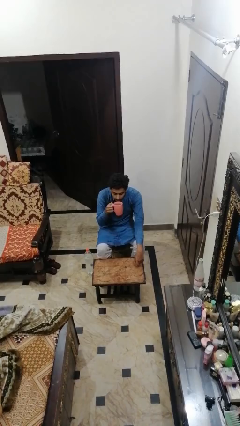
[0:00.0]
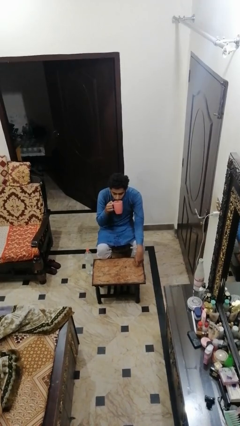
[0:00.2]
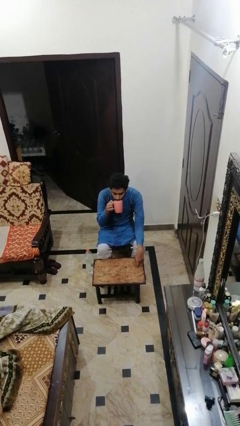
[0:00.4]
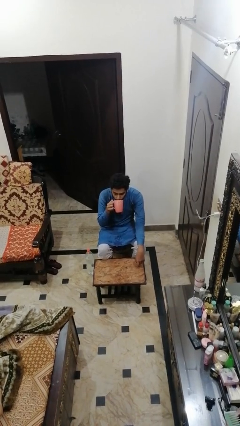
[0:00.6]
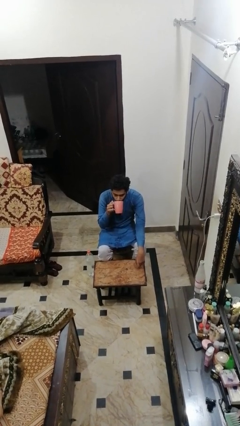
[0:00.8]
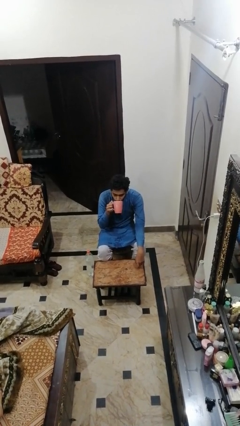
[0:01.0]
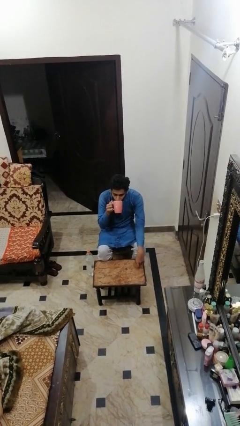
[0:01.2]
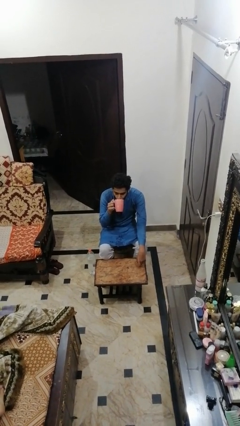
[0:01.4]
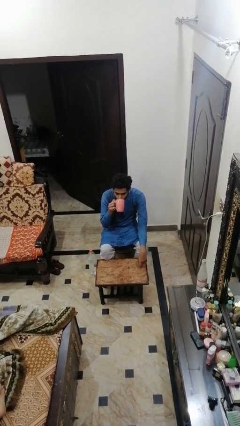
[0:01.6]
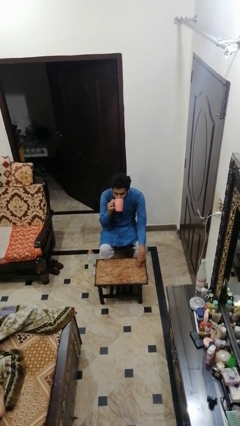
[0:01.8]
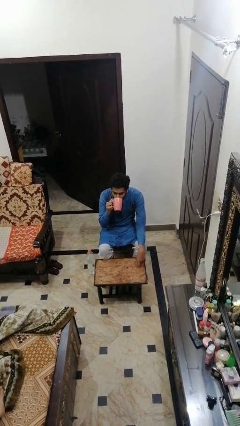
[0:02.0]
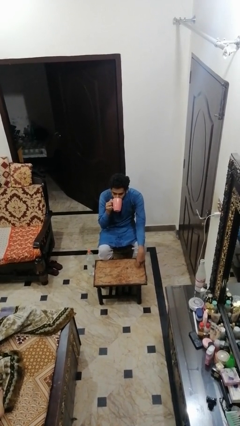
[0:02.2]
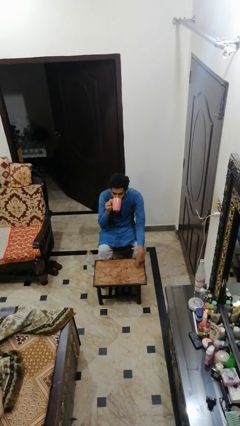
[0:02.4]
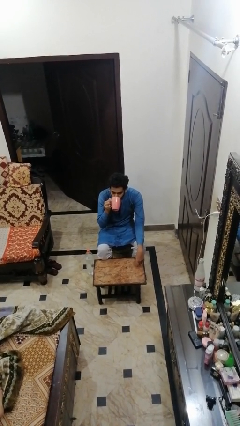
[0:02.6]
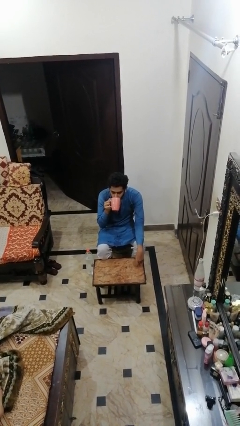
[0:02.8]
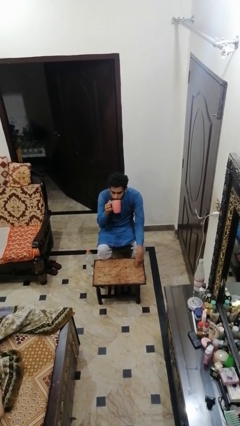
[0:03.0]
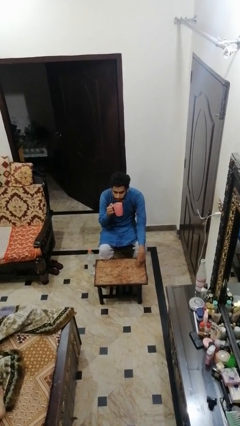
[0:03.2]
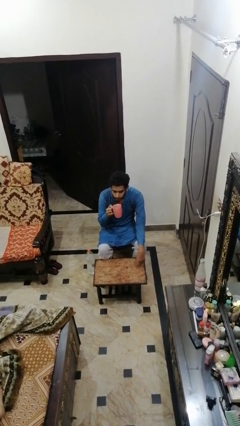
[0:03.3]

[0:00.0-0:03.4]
person drinks from mug

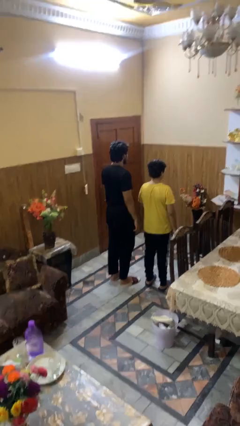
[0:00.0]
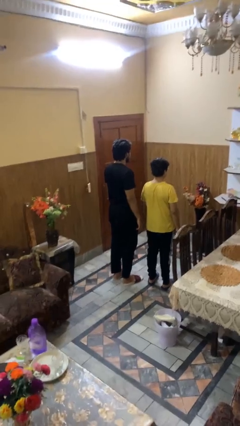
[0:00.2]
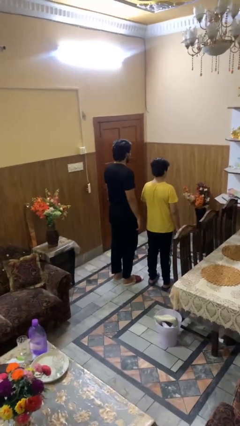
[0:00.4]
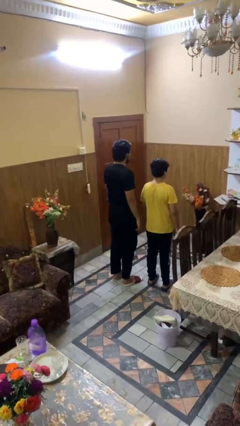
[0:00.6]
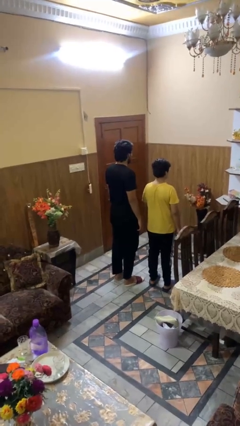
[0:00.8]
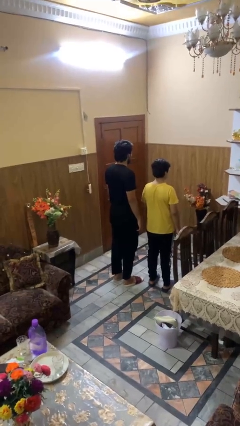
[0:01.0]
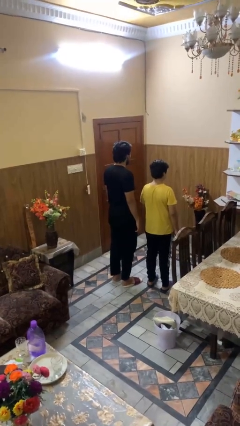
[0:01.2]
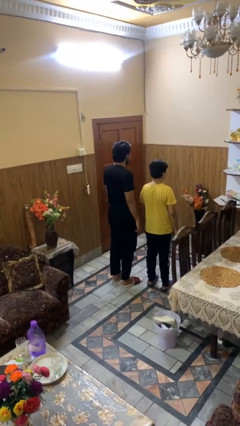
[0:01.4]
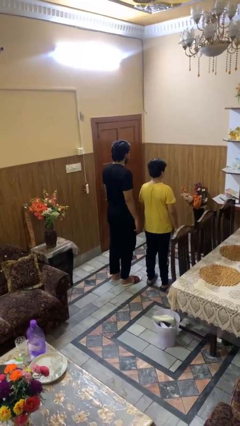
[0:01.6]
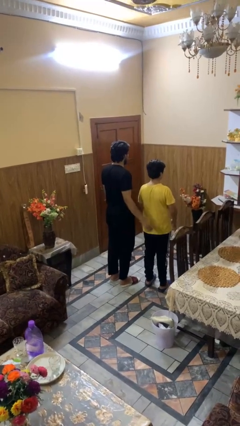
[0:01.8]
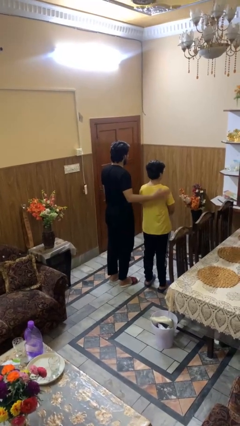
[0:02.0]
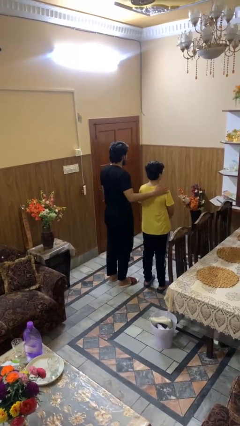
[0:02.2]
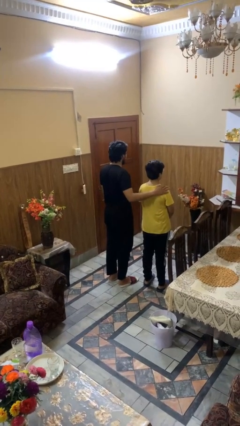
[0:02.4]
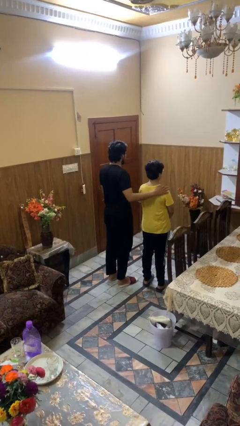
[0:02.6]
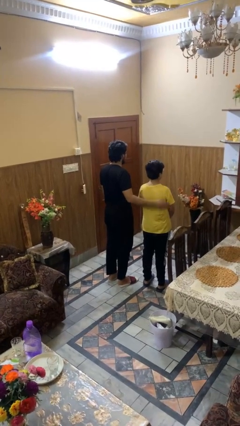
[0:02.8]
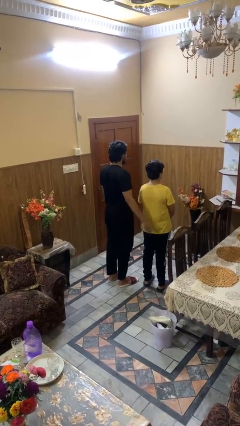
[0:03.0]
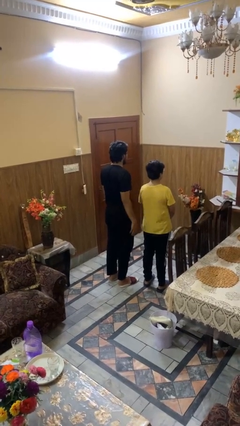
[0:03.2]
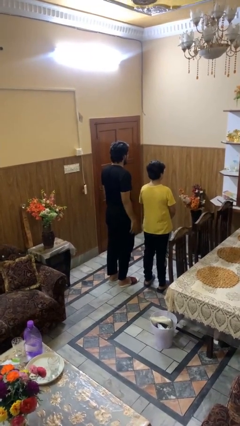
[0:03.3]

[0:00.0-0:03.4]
person touches back of person

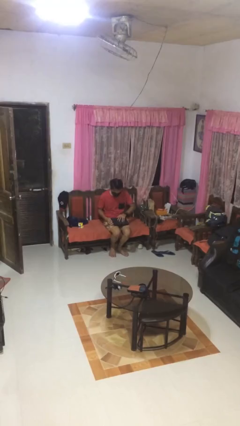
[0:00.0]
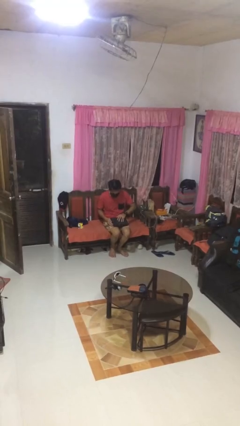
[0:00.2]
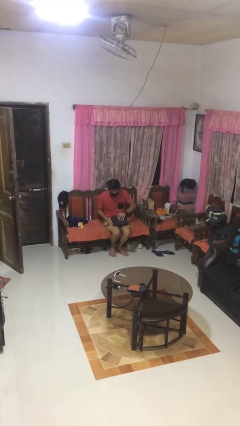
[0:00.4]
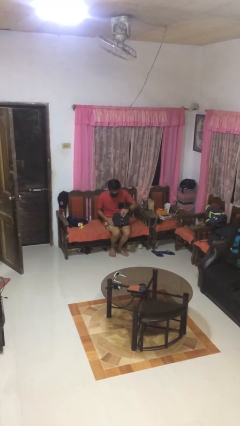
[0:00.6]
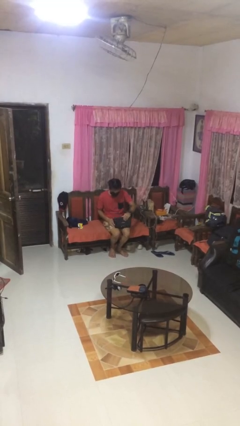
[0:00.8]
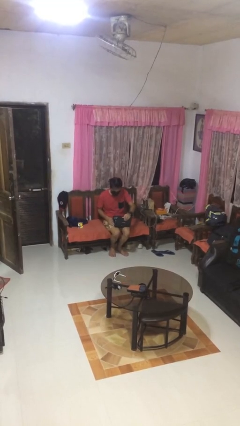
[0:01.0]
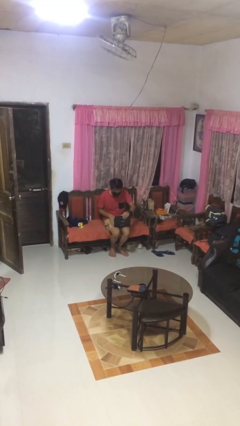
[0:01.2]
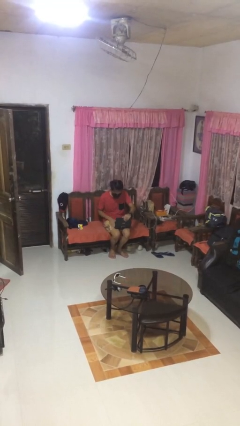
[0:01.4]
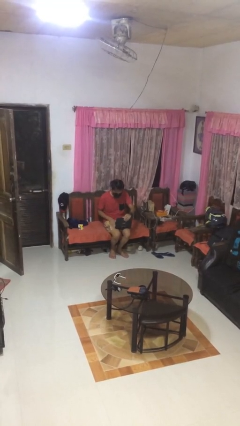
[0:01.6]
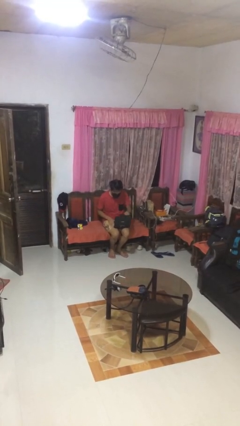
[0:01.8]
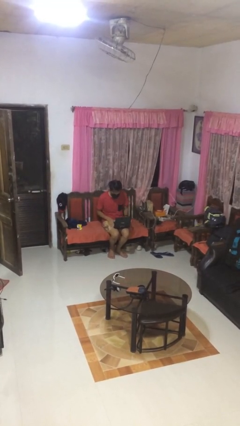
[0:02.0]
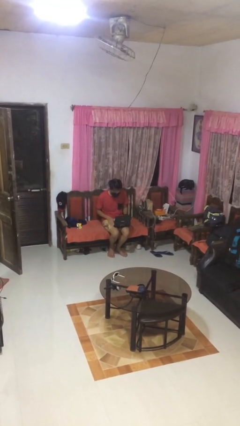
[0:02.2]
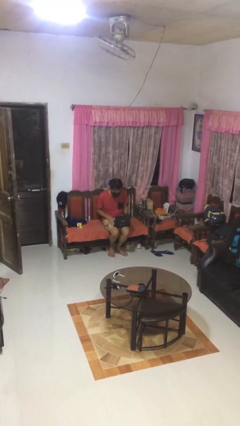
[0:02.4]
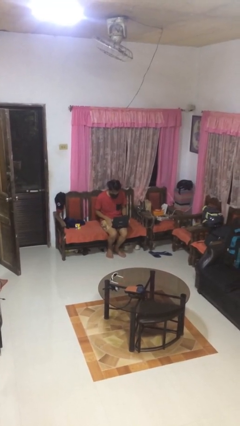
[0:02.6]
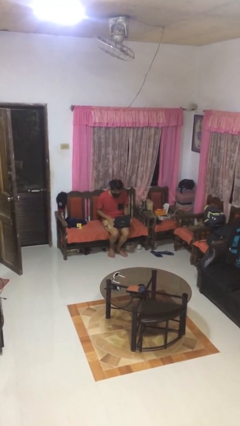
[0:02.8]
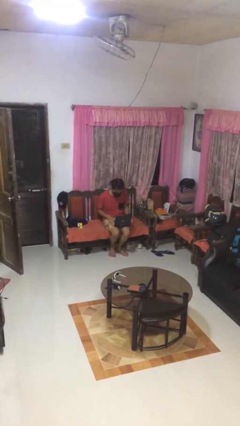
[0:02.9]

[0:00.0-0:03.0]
person opens laptop

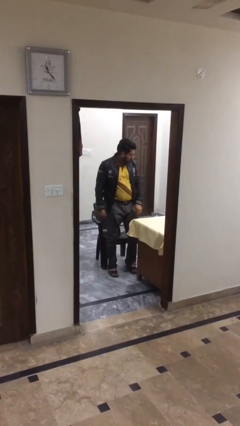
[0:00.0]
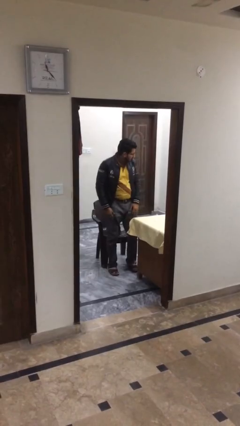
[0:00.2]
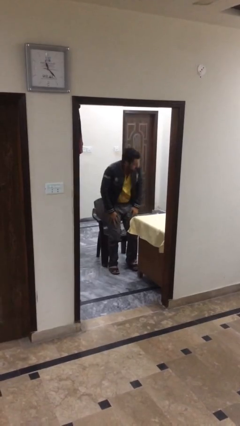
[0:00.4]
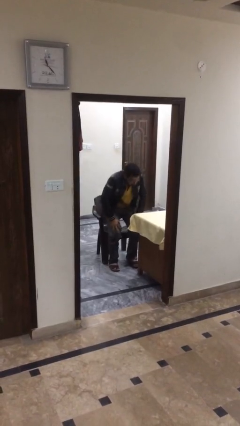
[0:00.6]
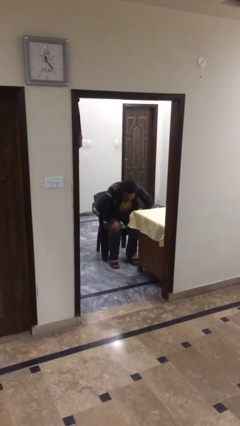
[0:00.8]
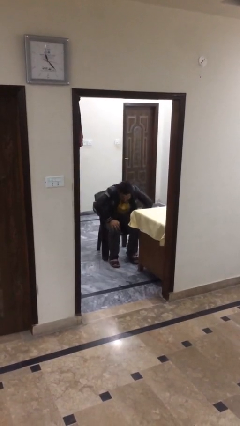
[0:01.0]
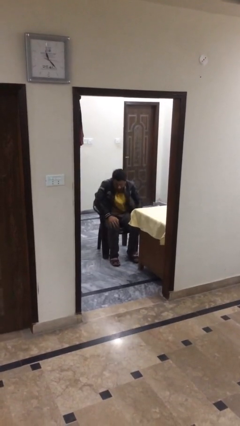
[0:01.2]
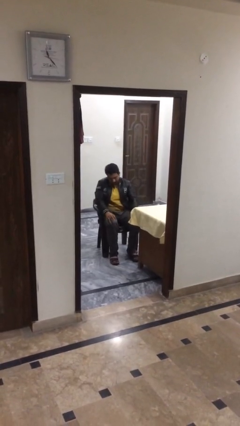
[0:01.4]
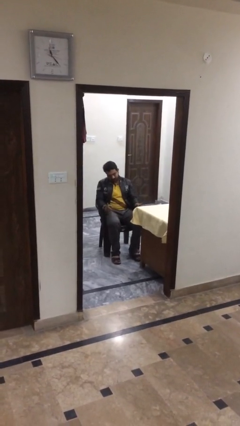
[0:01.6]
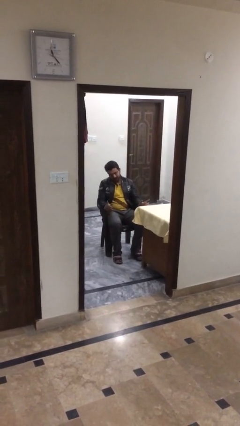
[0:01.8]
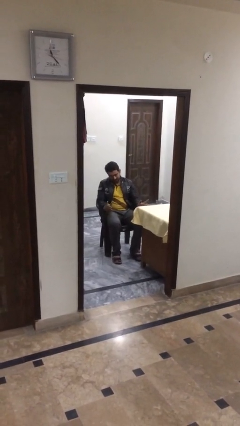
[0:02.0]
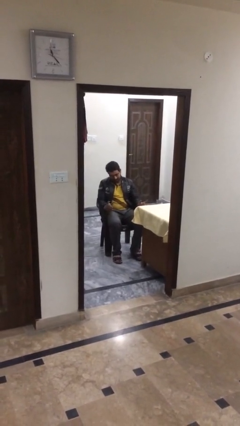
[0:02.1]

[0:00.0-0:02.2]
person sits down

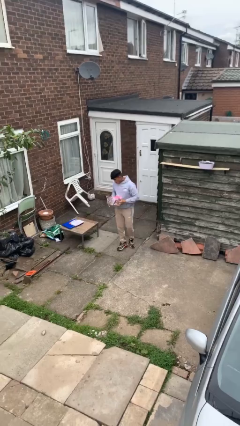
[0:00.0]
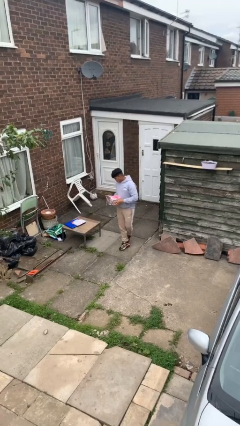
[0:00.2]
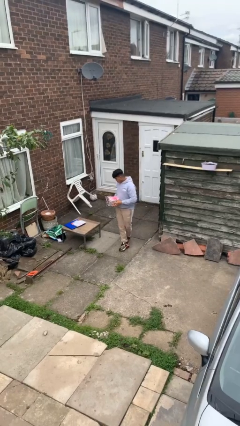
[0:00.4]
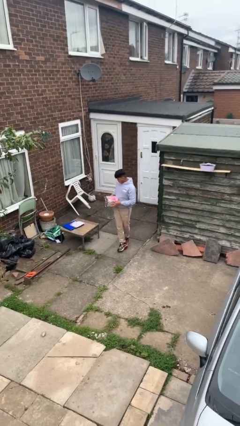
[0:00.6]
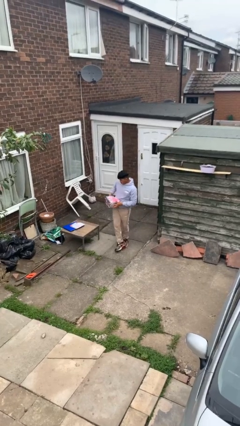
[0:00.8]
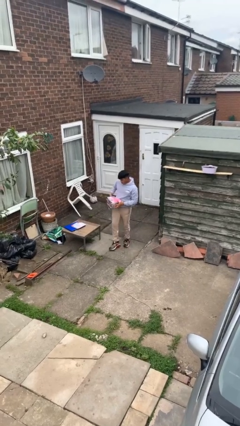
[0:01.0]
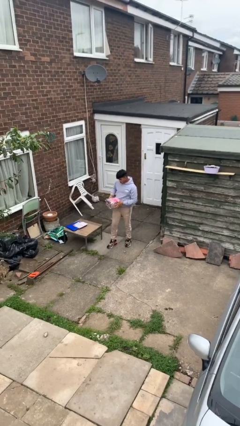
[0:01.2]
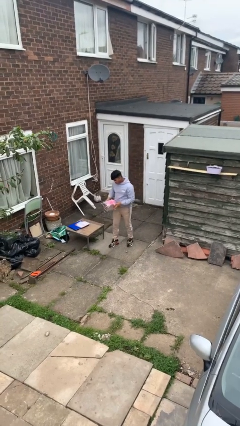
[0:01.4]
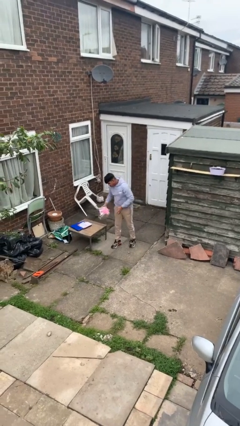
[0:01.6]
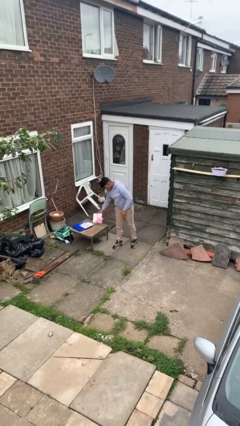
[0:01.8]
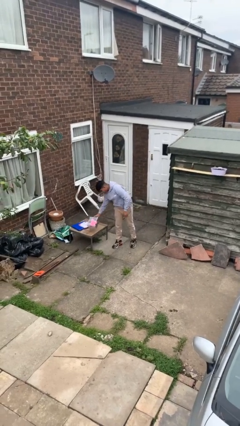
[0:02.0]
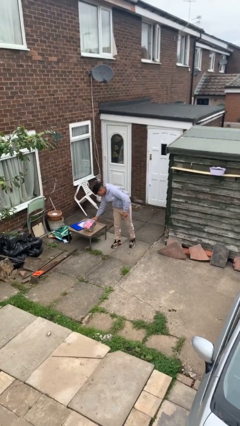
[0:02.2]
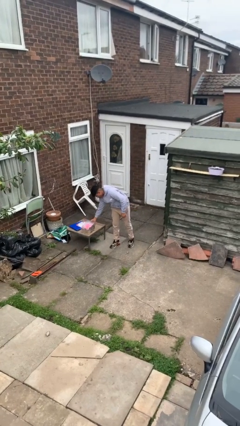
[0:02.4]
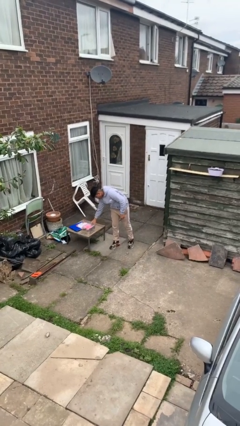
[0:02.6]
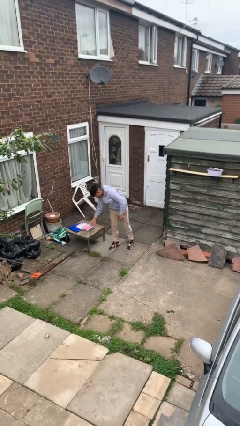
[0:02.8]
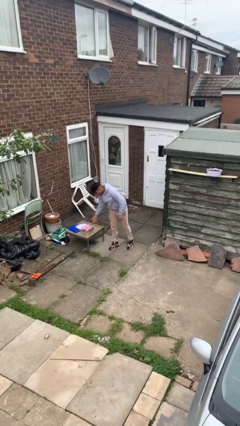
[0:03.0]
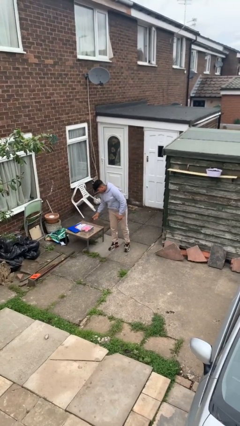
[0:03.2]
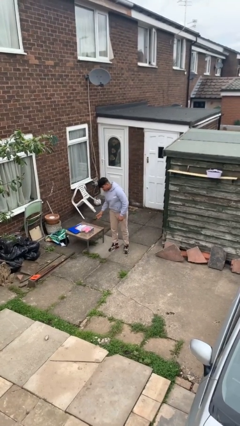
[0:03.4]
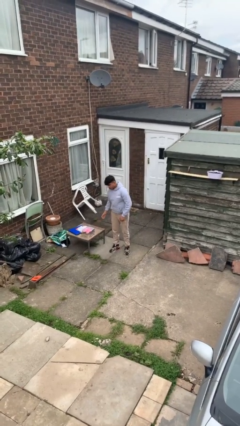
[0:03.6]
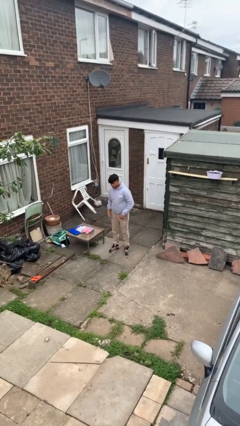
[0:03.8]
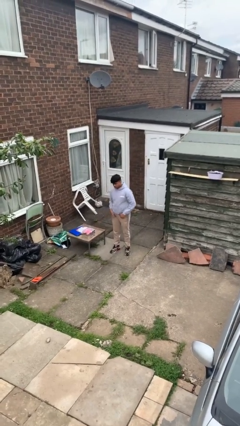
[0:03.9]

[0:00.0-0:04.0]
person puts down object on table

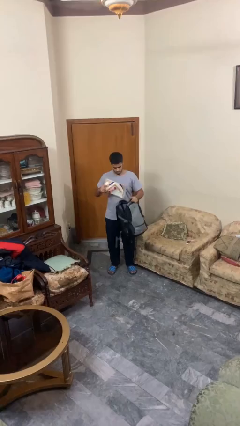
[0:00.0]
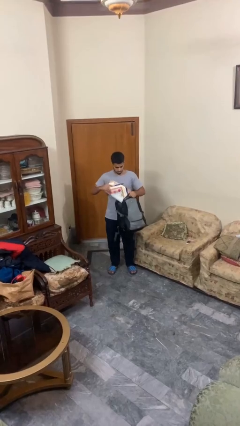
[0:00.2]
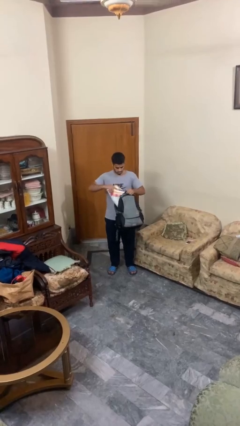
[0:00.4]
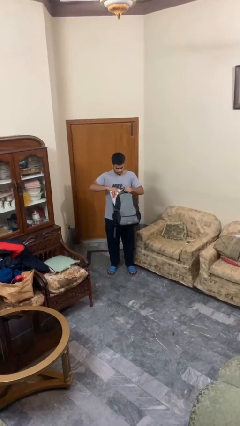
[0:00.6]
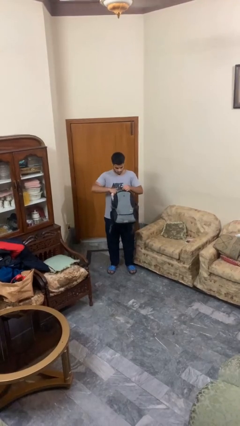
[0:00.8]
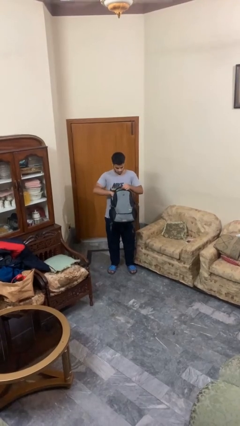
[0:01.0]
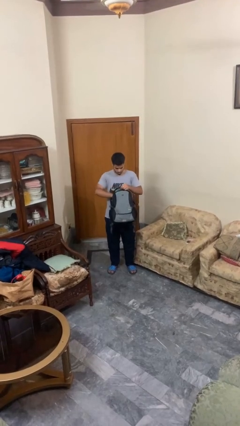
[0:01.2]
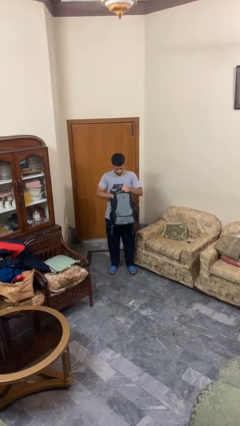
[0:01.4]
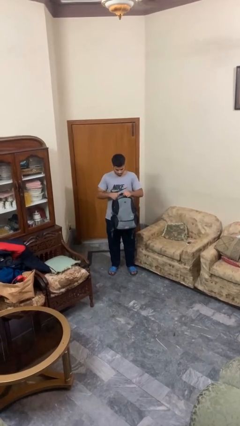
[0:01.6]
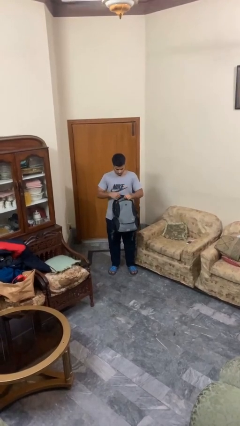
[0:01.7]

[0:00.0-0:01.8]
person puts object into backpack
